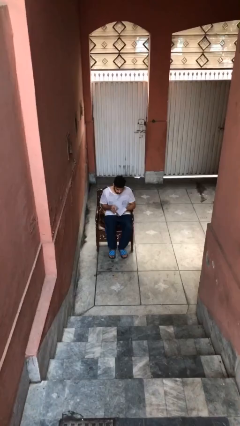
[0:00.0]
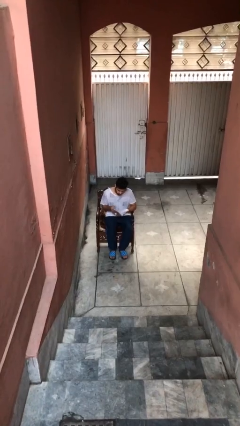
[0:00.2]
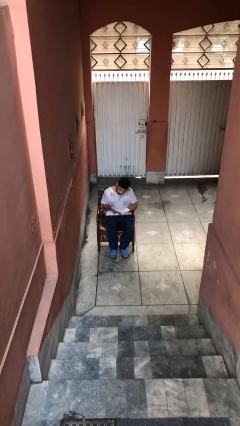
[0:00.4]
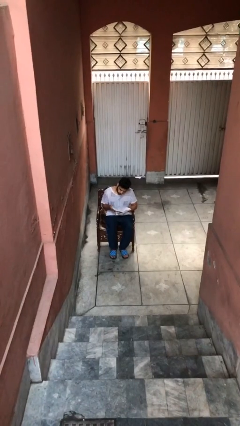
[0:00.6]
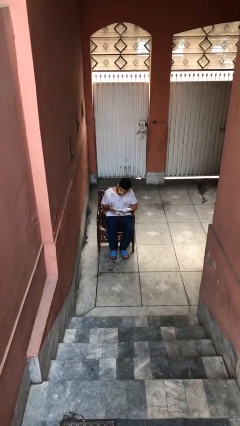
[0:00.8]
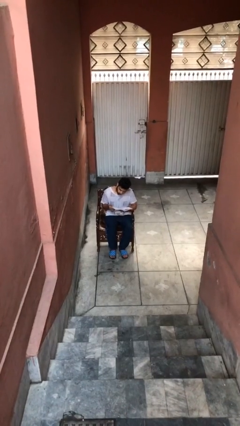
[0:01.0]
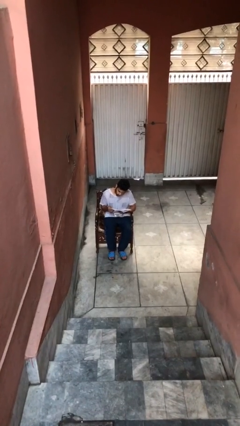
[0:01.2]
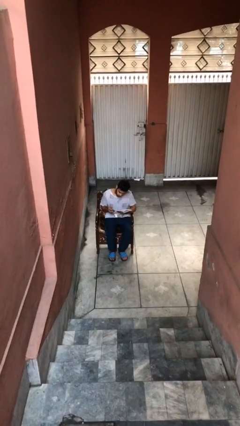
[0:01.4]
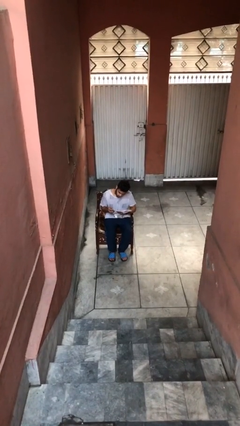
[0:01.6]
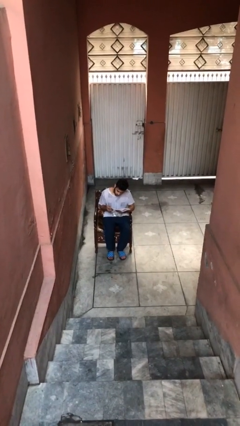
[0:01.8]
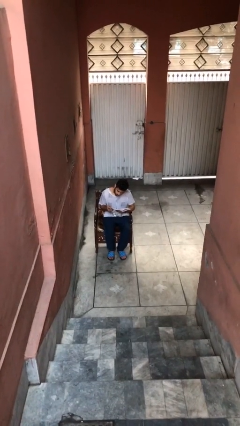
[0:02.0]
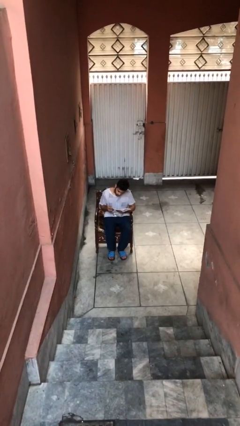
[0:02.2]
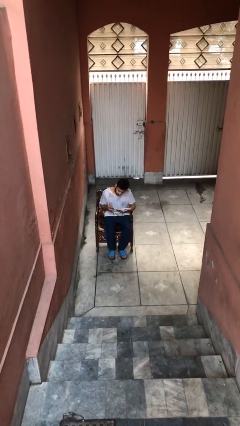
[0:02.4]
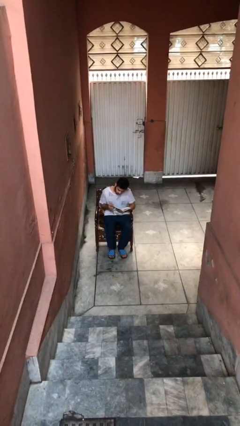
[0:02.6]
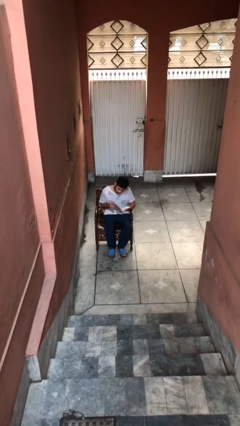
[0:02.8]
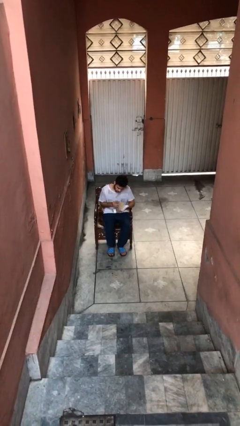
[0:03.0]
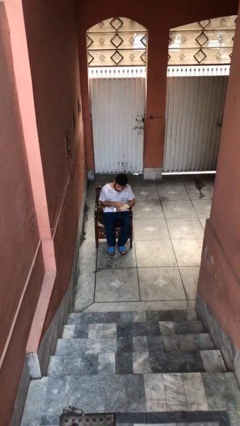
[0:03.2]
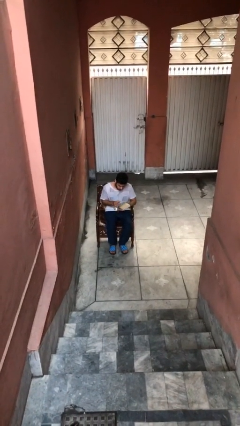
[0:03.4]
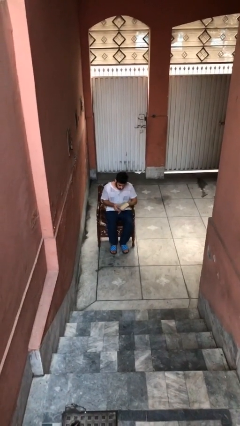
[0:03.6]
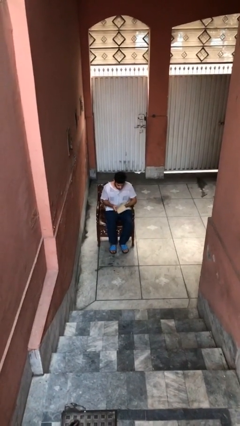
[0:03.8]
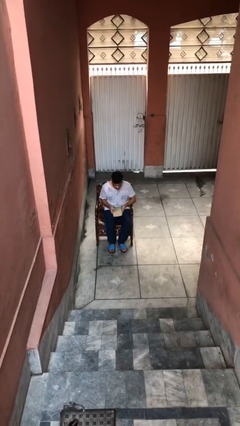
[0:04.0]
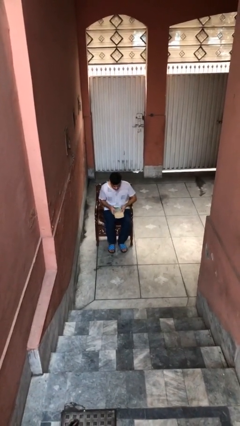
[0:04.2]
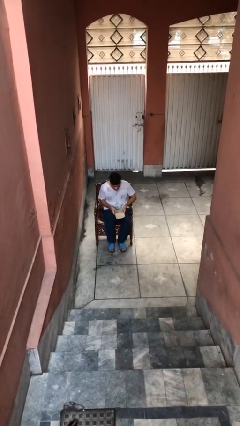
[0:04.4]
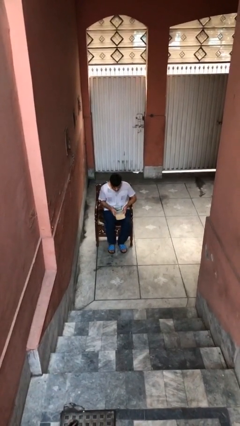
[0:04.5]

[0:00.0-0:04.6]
person reads document

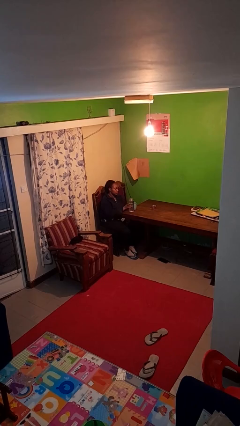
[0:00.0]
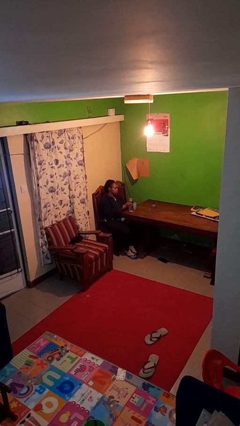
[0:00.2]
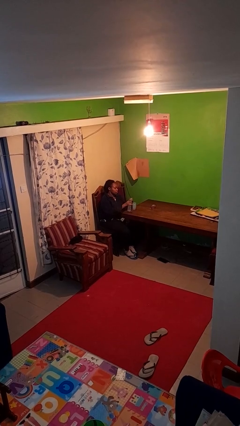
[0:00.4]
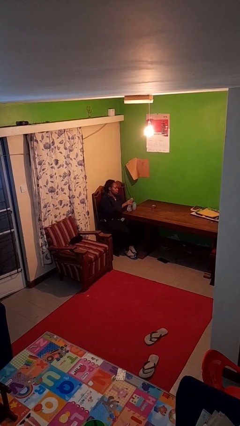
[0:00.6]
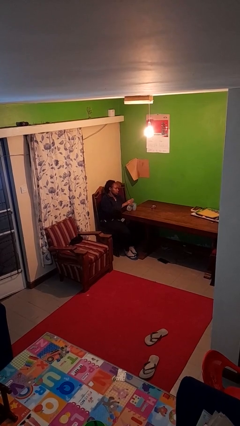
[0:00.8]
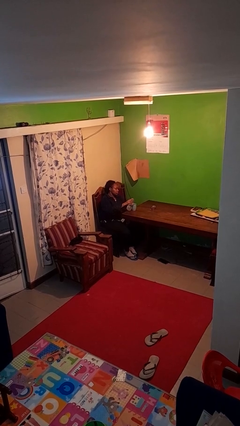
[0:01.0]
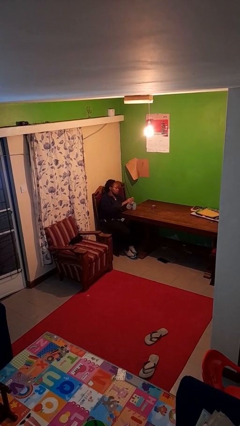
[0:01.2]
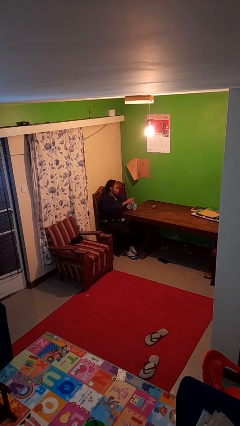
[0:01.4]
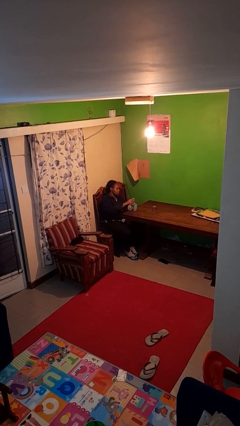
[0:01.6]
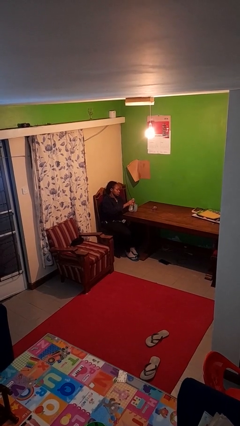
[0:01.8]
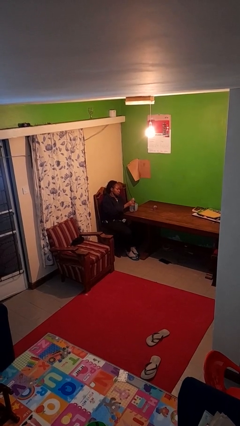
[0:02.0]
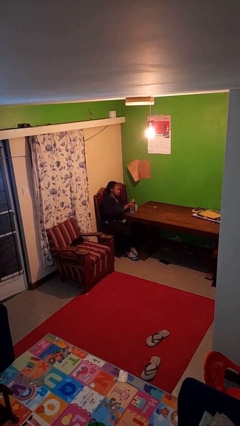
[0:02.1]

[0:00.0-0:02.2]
person pours liquid into cup

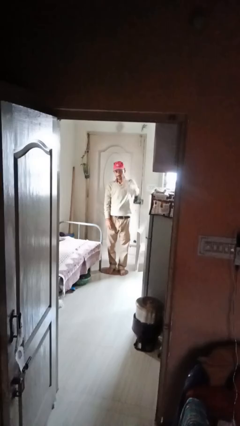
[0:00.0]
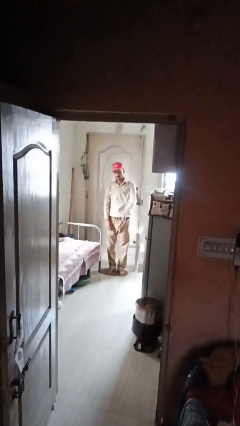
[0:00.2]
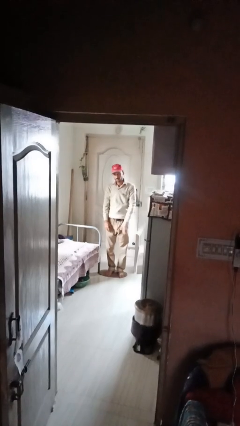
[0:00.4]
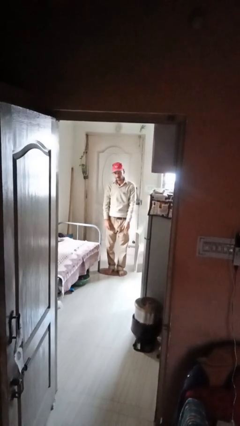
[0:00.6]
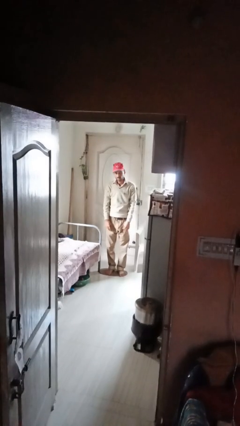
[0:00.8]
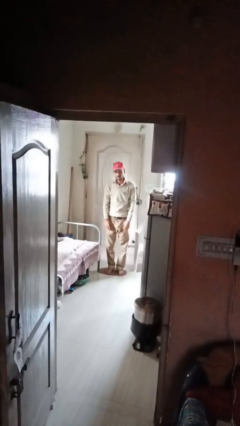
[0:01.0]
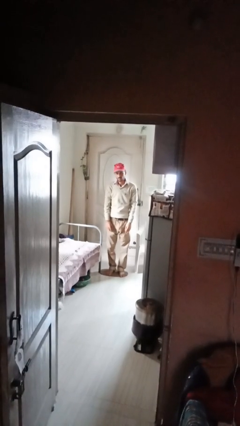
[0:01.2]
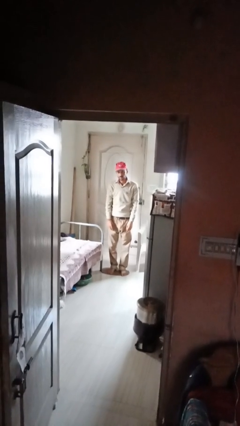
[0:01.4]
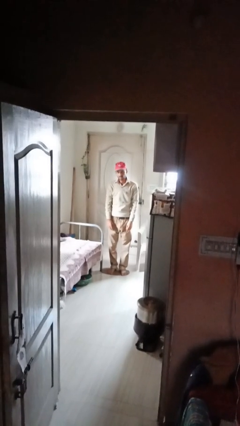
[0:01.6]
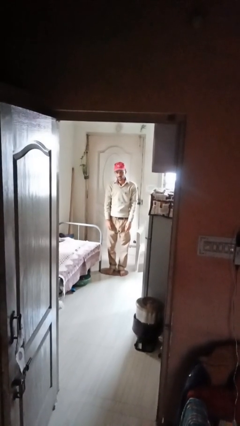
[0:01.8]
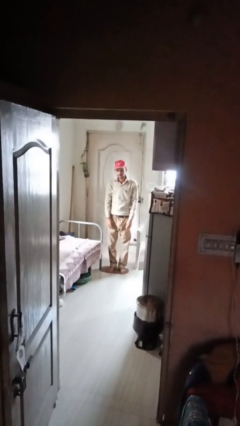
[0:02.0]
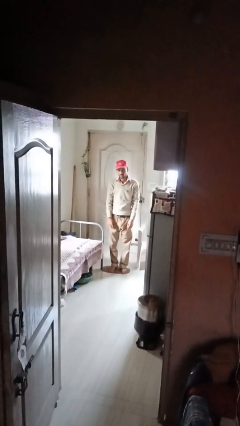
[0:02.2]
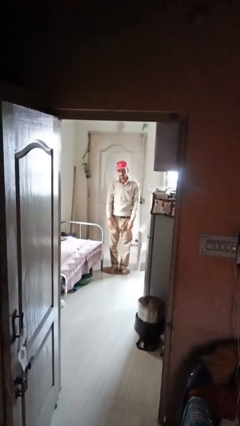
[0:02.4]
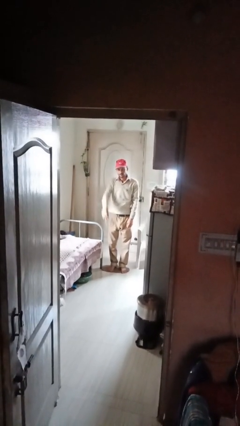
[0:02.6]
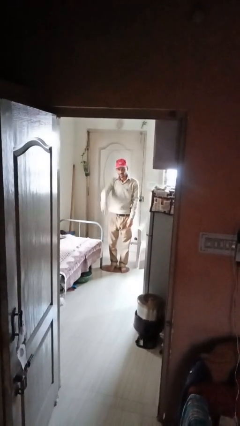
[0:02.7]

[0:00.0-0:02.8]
person gestures swipe down

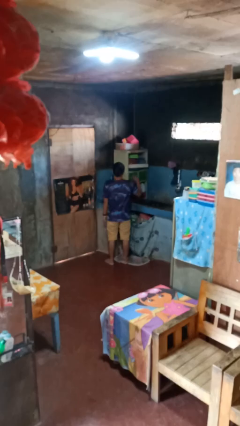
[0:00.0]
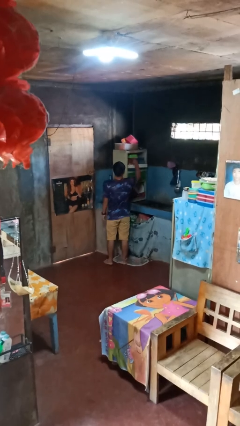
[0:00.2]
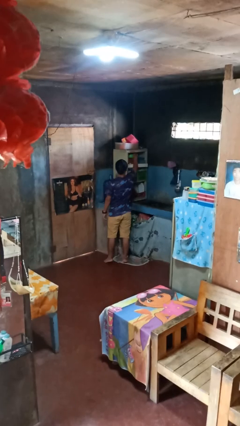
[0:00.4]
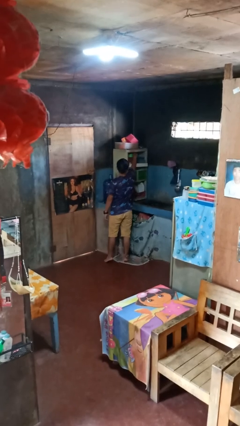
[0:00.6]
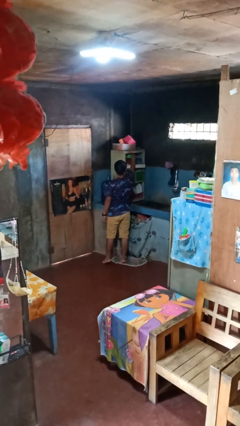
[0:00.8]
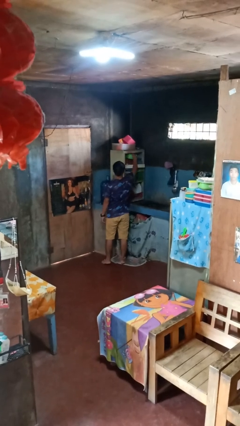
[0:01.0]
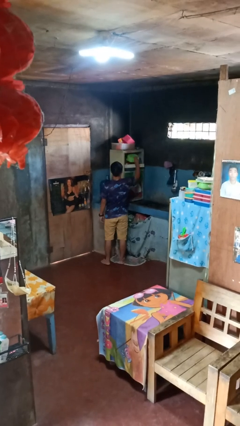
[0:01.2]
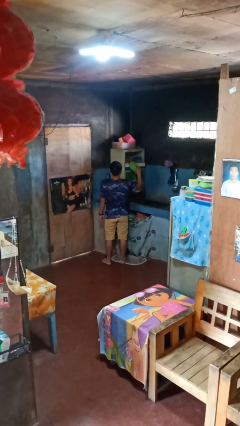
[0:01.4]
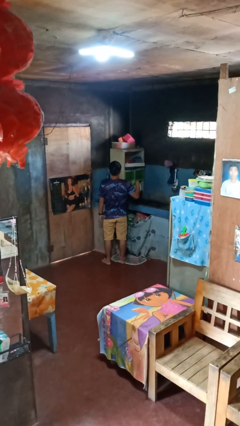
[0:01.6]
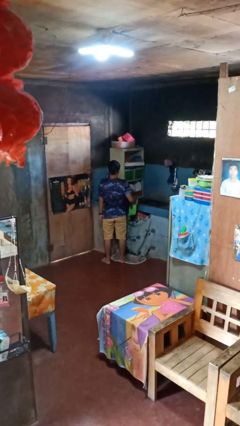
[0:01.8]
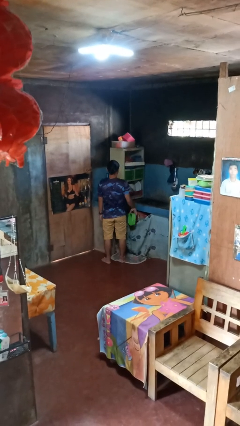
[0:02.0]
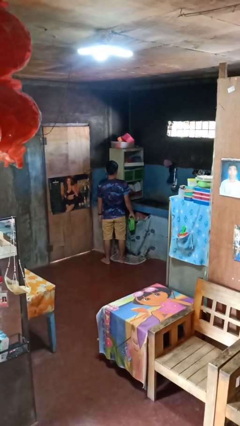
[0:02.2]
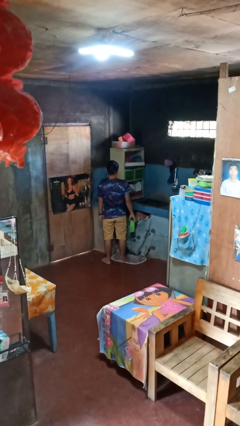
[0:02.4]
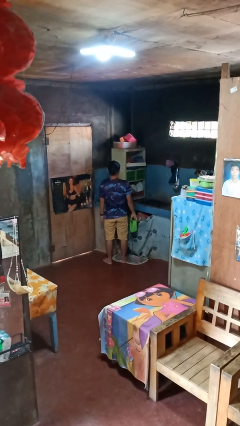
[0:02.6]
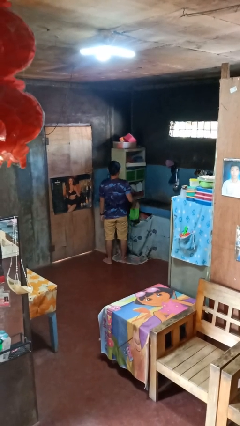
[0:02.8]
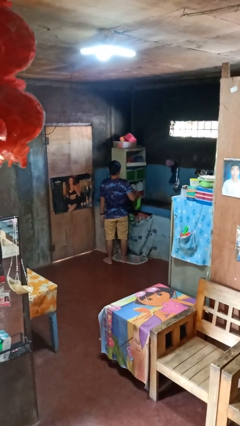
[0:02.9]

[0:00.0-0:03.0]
person takes object from cabinet

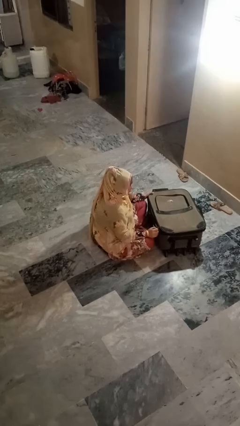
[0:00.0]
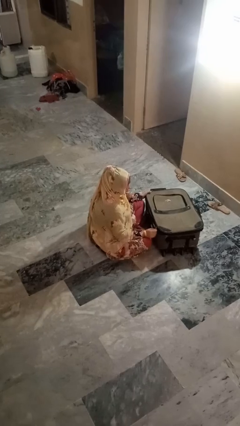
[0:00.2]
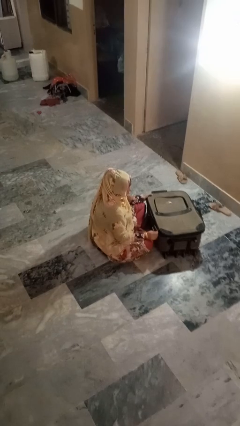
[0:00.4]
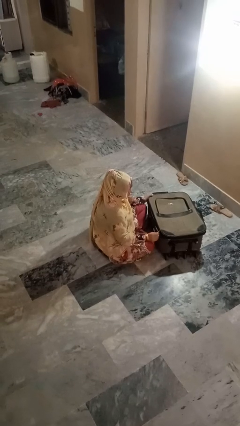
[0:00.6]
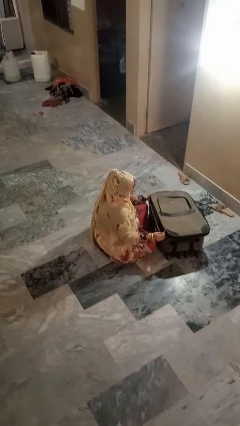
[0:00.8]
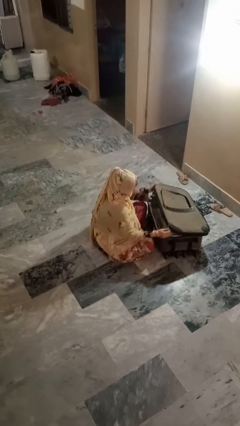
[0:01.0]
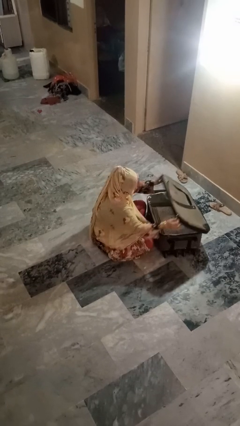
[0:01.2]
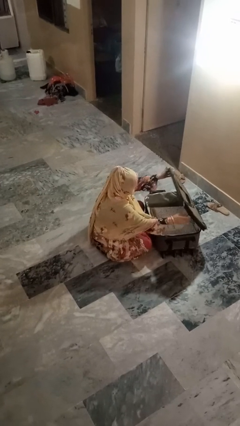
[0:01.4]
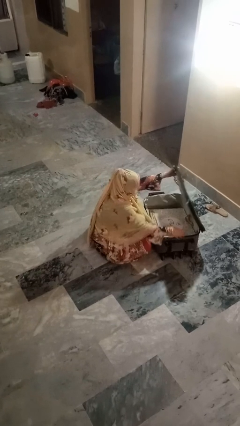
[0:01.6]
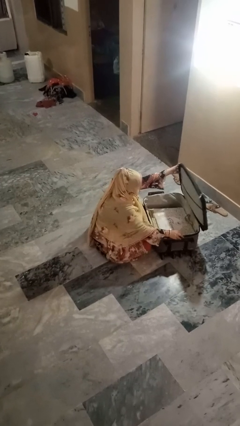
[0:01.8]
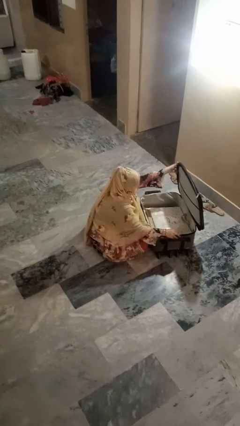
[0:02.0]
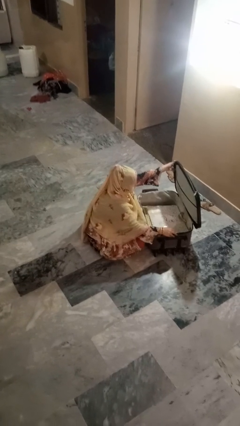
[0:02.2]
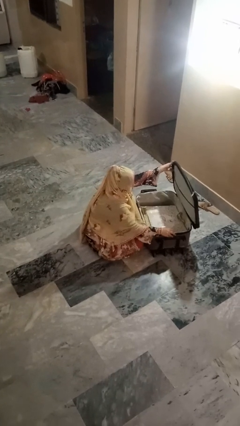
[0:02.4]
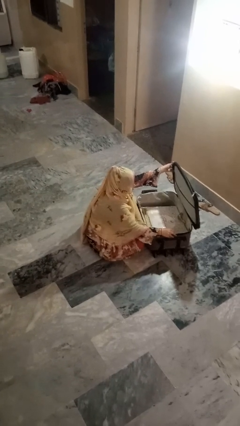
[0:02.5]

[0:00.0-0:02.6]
person opens suitcase

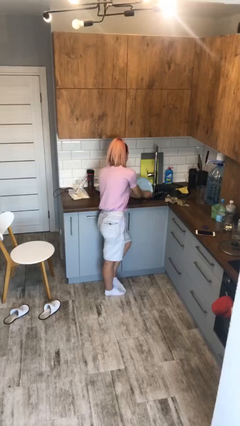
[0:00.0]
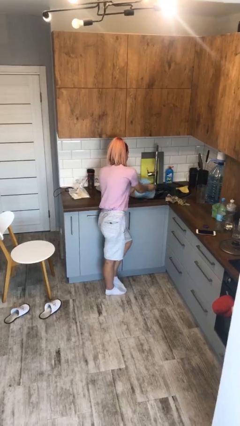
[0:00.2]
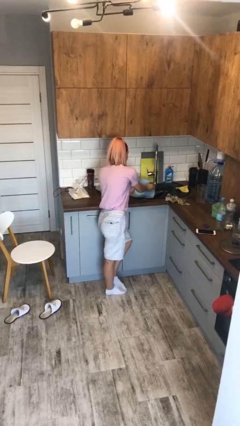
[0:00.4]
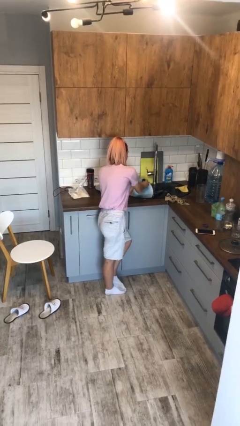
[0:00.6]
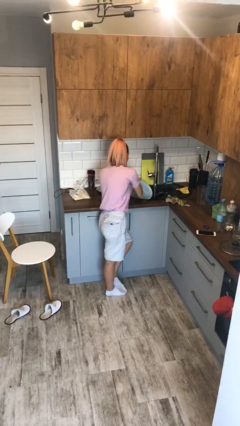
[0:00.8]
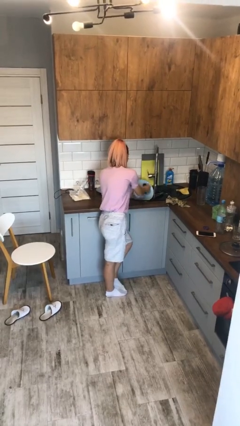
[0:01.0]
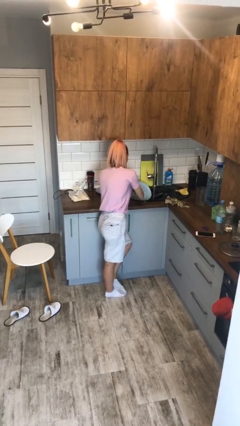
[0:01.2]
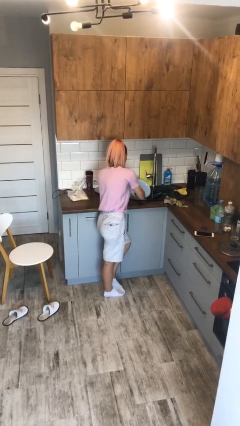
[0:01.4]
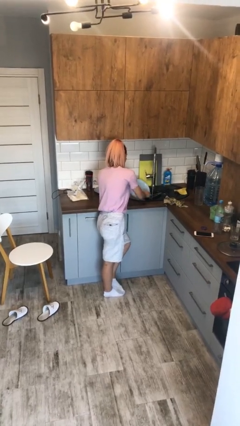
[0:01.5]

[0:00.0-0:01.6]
person washes dish

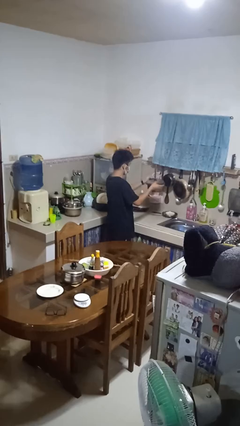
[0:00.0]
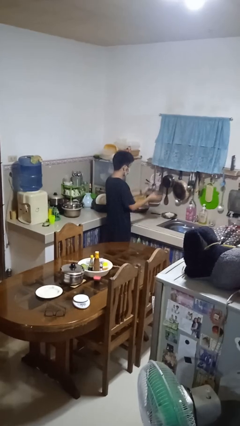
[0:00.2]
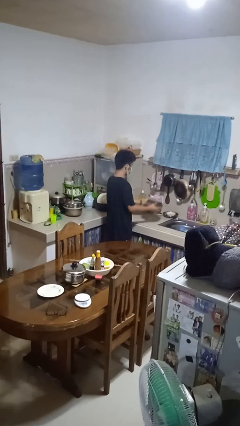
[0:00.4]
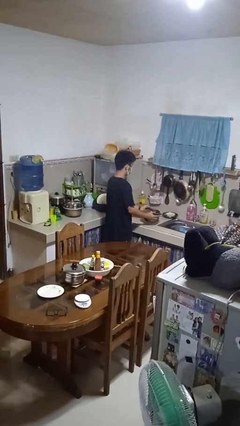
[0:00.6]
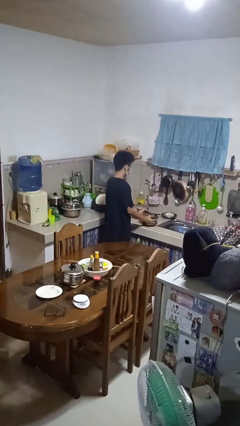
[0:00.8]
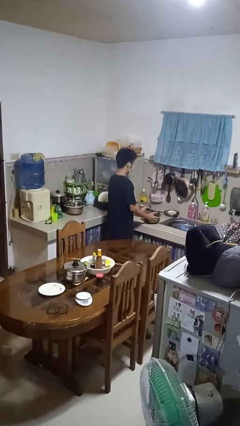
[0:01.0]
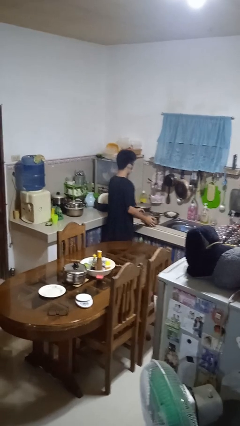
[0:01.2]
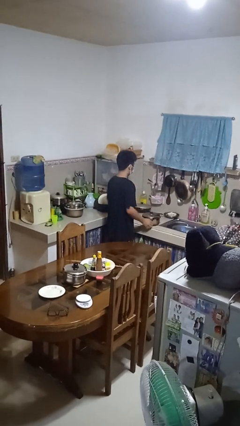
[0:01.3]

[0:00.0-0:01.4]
person puts down object on countertop
